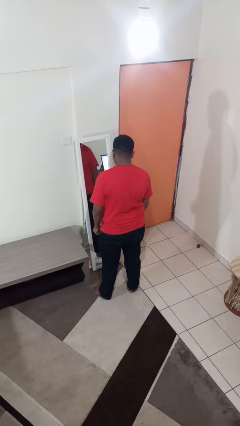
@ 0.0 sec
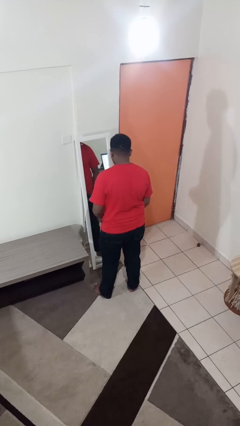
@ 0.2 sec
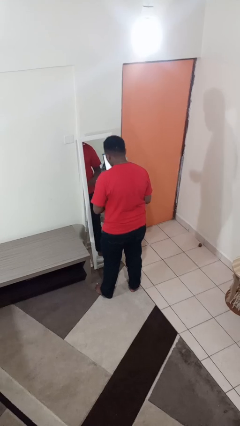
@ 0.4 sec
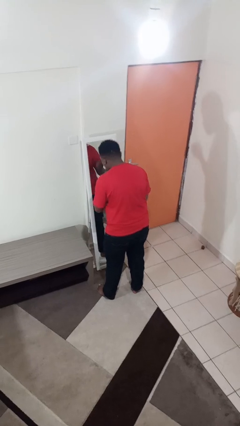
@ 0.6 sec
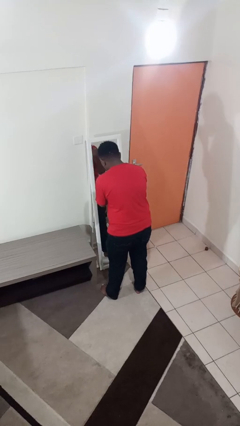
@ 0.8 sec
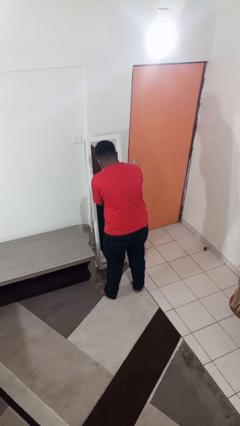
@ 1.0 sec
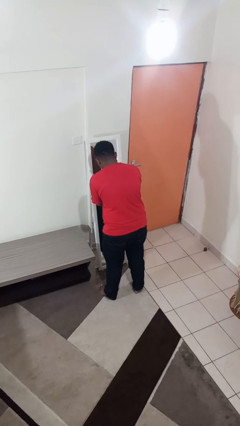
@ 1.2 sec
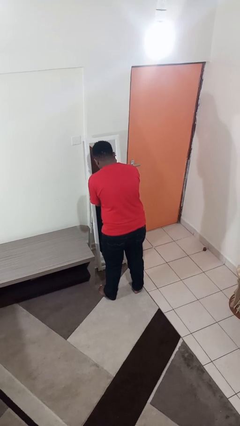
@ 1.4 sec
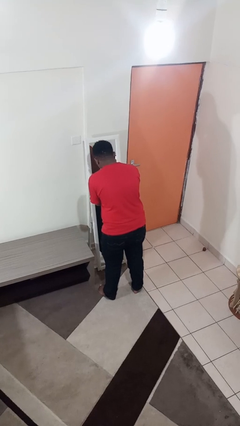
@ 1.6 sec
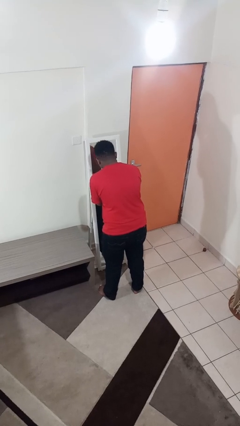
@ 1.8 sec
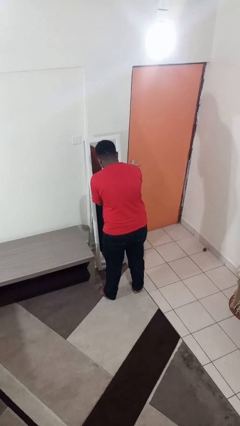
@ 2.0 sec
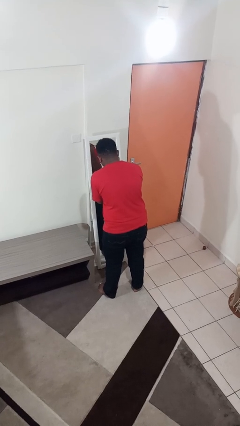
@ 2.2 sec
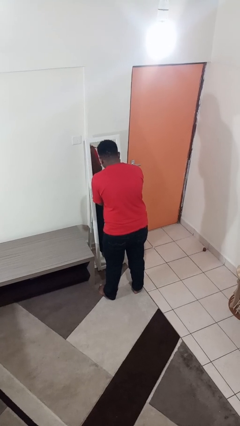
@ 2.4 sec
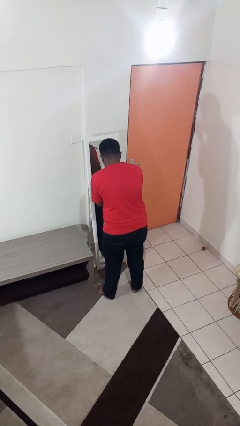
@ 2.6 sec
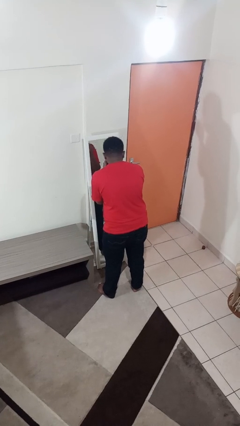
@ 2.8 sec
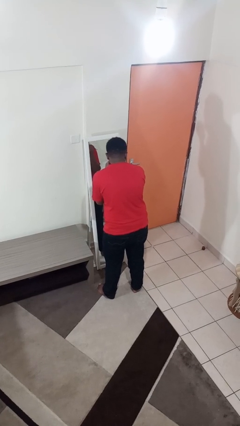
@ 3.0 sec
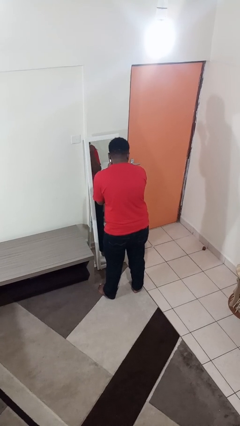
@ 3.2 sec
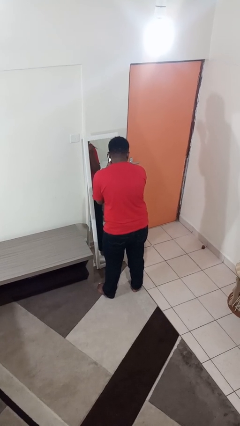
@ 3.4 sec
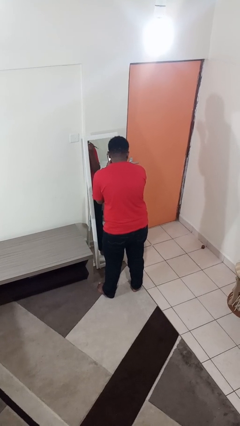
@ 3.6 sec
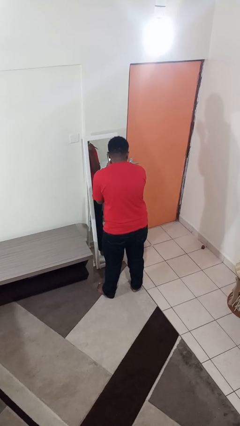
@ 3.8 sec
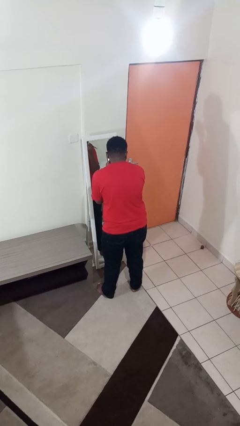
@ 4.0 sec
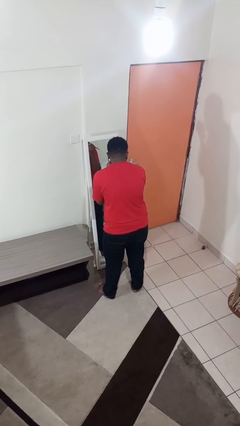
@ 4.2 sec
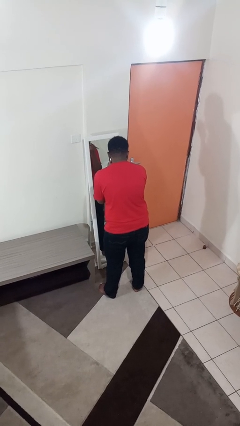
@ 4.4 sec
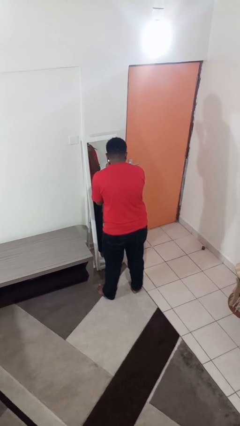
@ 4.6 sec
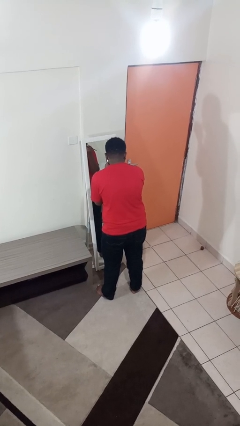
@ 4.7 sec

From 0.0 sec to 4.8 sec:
person applies eye makeup

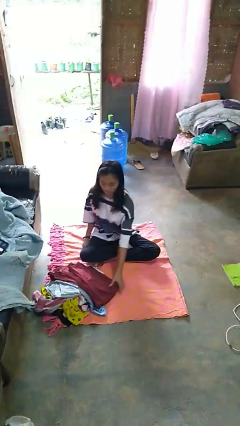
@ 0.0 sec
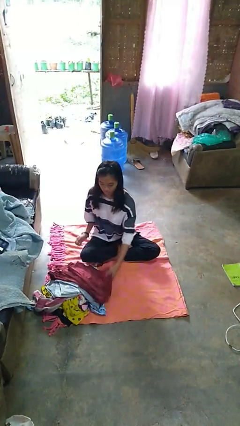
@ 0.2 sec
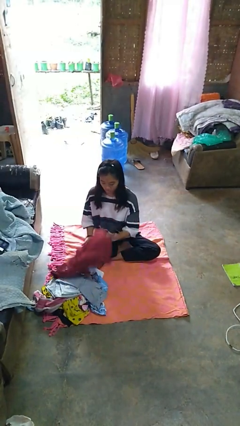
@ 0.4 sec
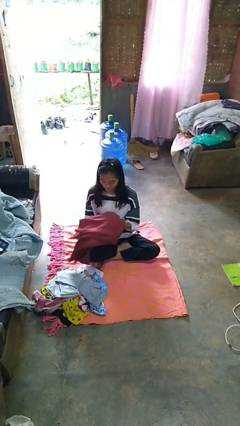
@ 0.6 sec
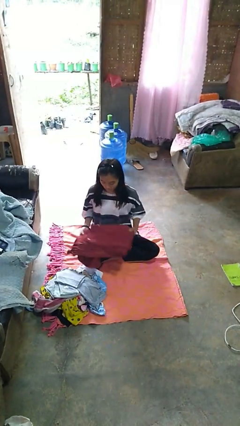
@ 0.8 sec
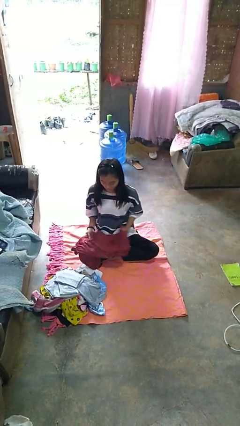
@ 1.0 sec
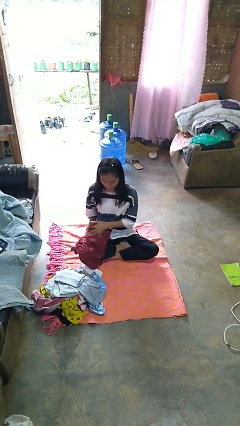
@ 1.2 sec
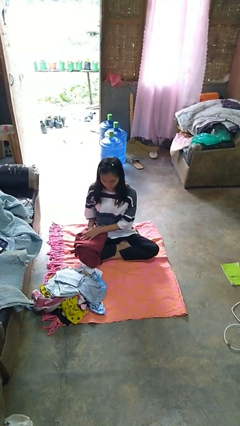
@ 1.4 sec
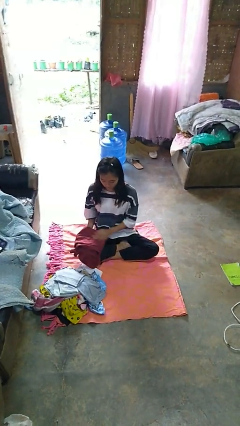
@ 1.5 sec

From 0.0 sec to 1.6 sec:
person folds pants

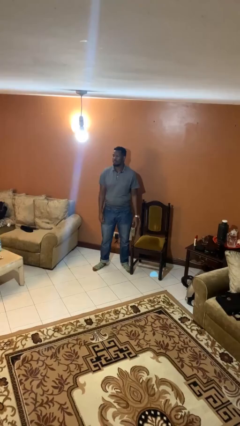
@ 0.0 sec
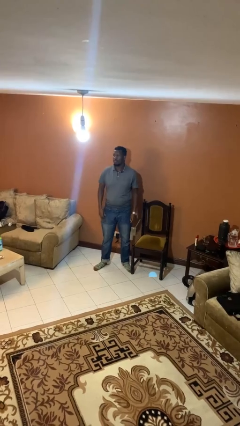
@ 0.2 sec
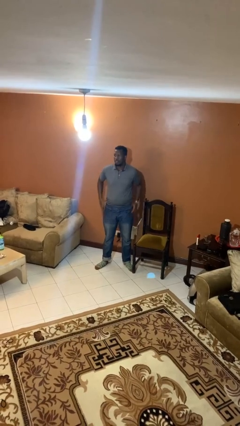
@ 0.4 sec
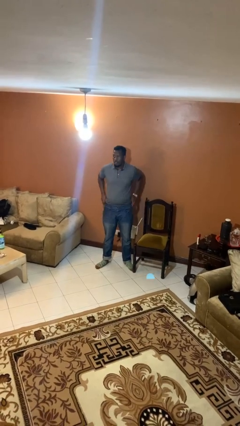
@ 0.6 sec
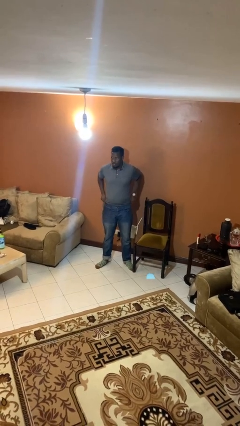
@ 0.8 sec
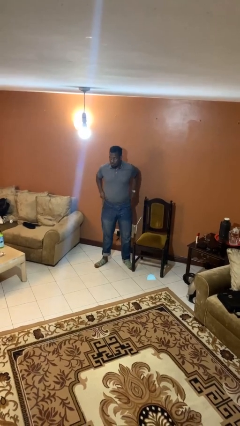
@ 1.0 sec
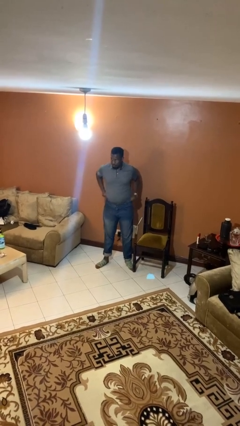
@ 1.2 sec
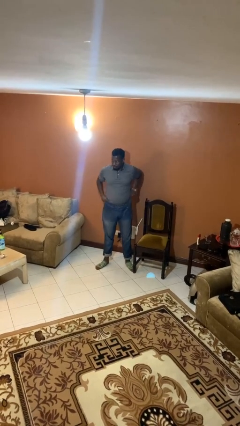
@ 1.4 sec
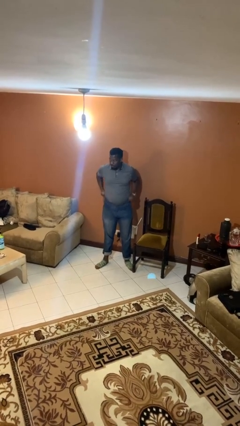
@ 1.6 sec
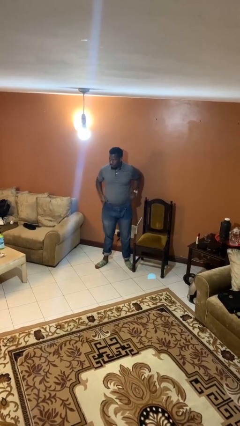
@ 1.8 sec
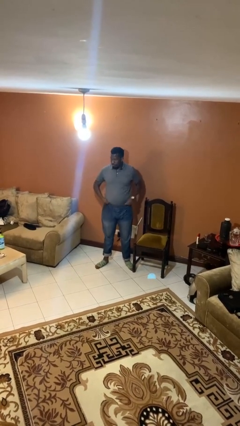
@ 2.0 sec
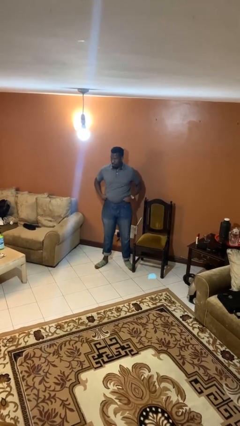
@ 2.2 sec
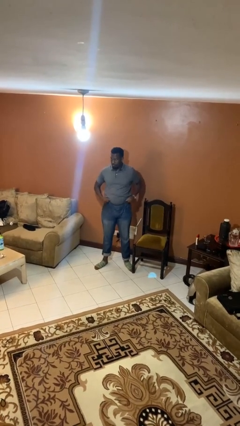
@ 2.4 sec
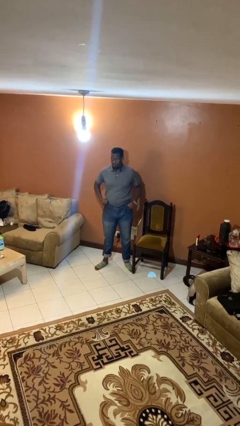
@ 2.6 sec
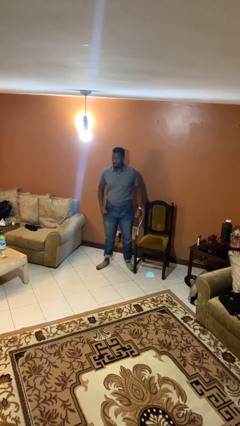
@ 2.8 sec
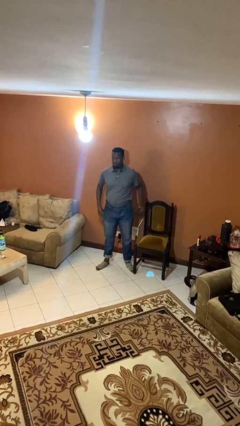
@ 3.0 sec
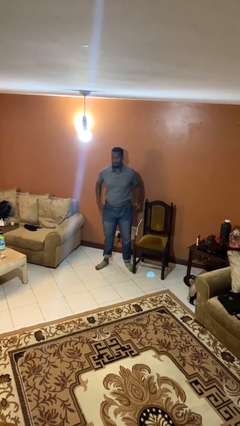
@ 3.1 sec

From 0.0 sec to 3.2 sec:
person hikes up pants

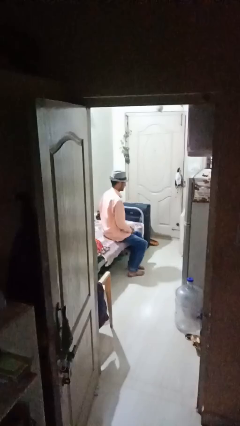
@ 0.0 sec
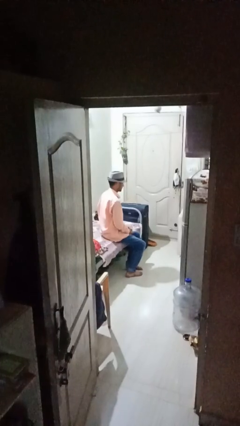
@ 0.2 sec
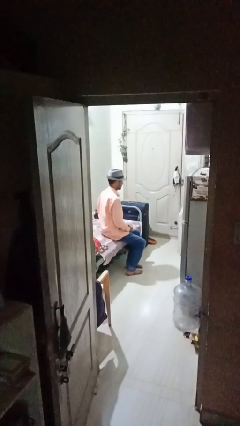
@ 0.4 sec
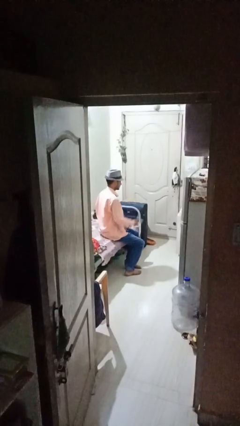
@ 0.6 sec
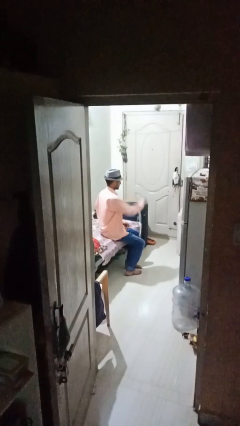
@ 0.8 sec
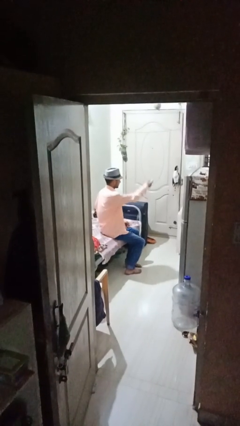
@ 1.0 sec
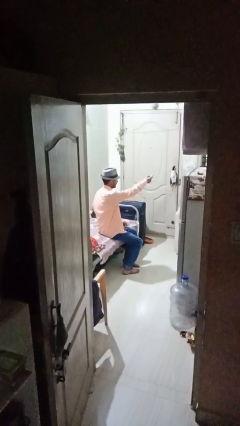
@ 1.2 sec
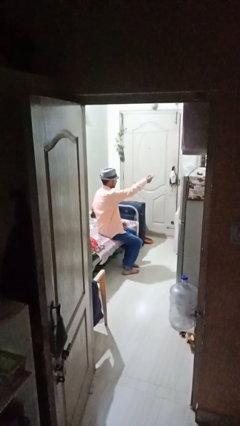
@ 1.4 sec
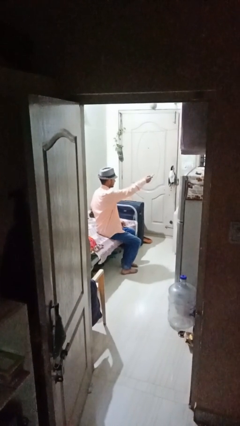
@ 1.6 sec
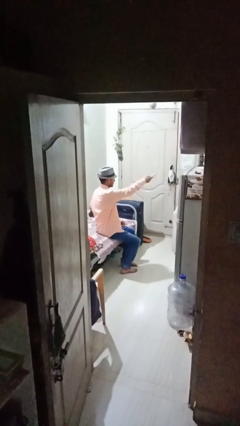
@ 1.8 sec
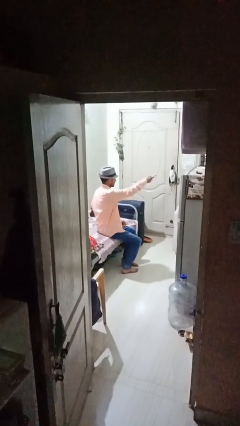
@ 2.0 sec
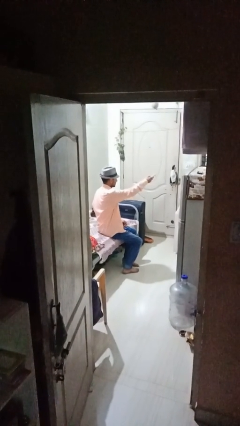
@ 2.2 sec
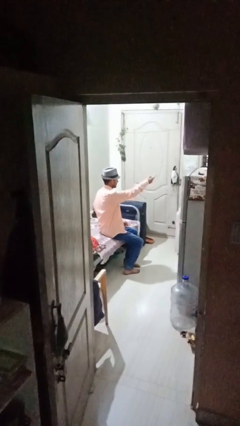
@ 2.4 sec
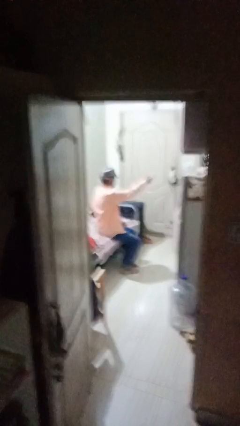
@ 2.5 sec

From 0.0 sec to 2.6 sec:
person uses television remote

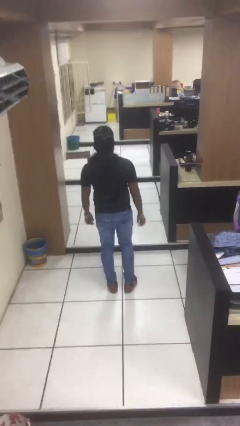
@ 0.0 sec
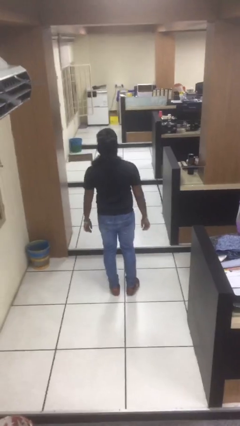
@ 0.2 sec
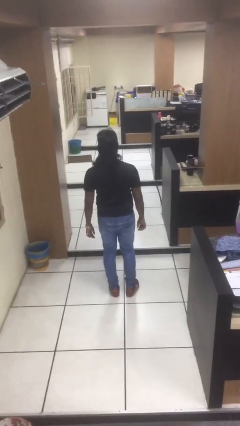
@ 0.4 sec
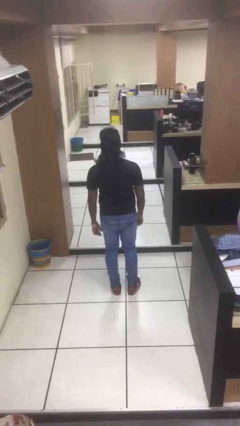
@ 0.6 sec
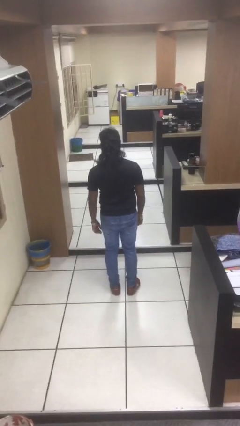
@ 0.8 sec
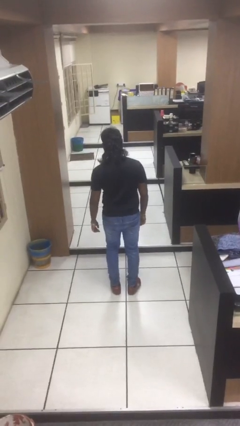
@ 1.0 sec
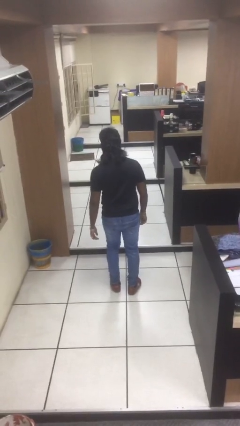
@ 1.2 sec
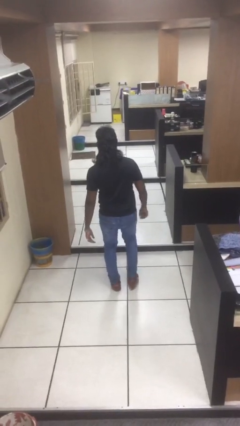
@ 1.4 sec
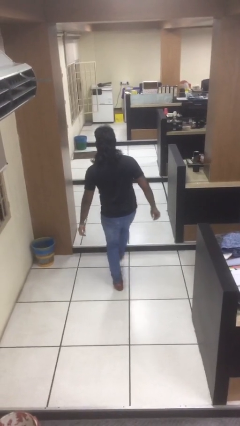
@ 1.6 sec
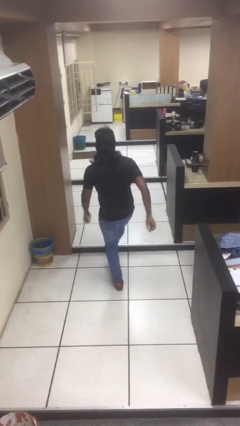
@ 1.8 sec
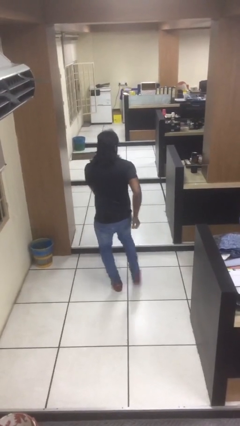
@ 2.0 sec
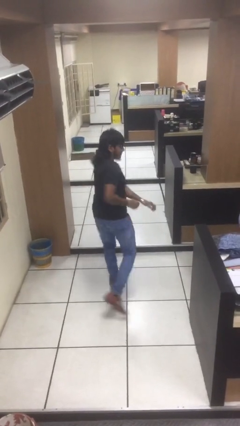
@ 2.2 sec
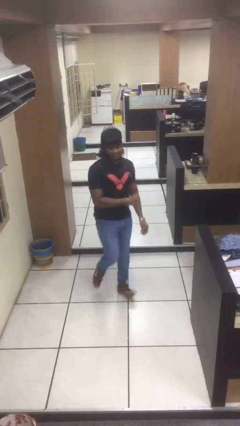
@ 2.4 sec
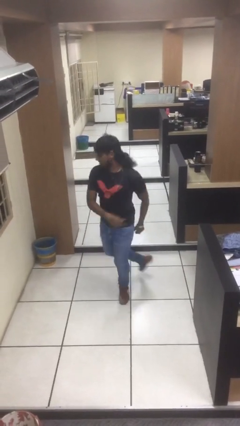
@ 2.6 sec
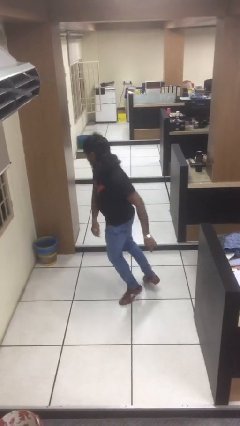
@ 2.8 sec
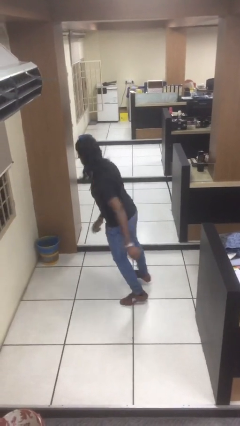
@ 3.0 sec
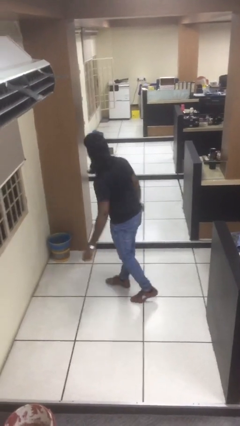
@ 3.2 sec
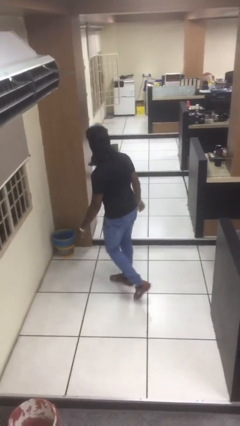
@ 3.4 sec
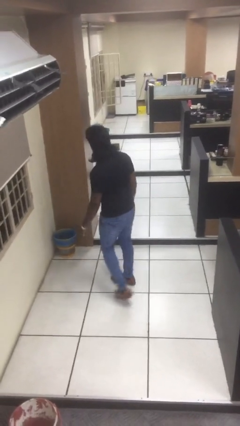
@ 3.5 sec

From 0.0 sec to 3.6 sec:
person twirls

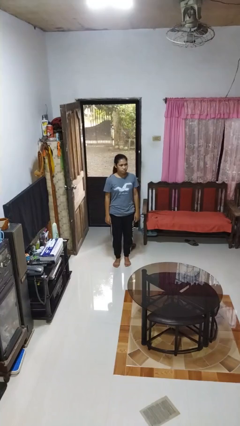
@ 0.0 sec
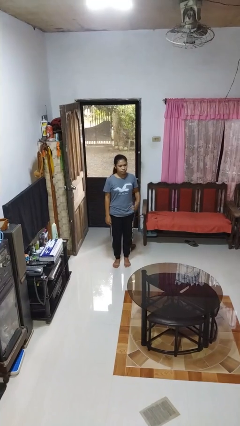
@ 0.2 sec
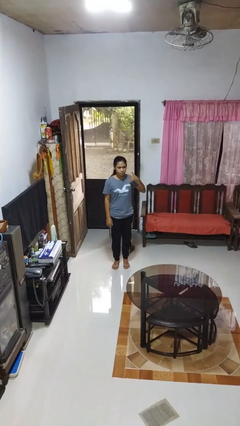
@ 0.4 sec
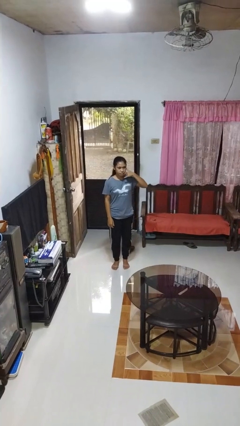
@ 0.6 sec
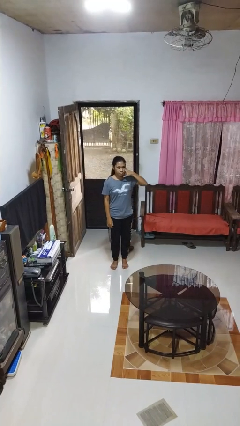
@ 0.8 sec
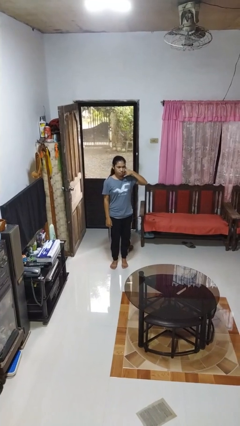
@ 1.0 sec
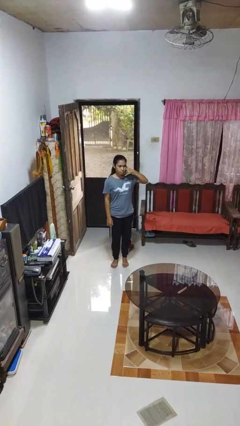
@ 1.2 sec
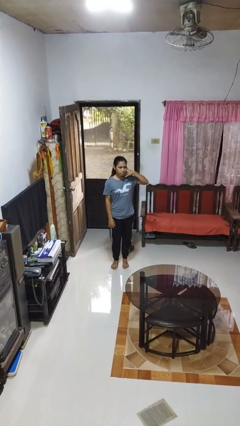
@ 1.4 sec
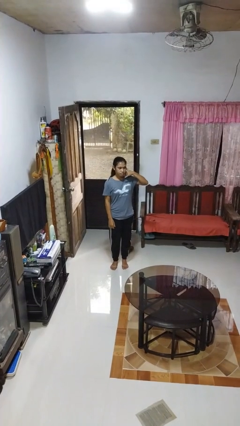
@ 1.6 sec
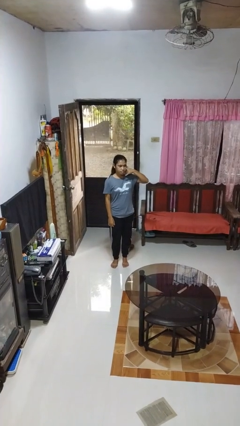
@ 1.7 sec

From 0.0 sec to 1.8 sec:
person gestures call me
